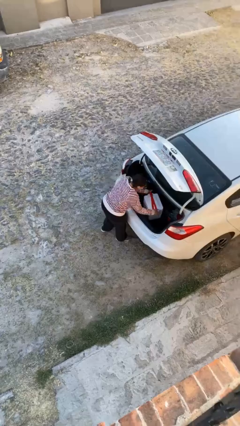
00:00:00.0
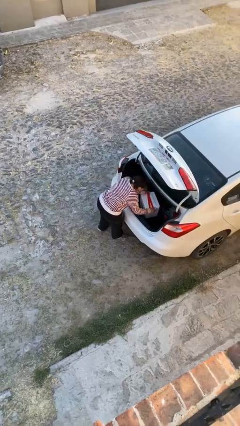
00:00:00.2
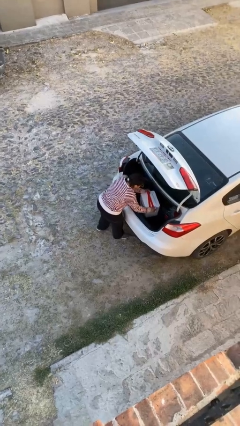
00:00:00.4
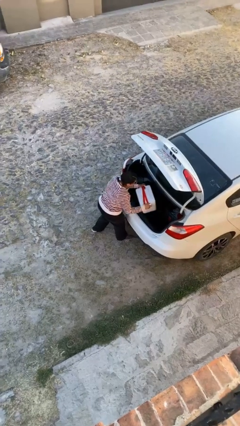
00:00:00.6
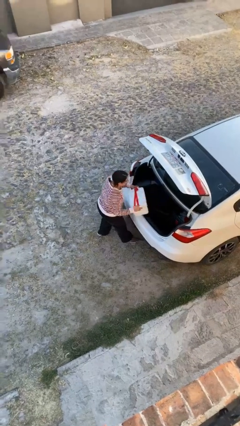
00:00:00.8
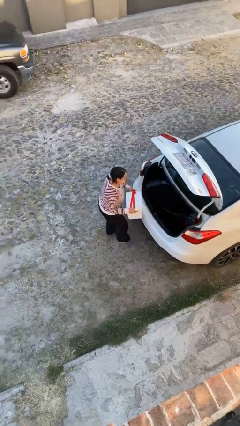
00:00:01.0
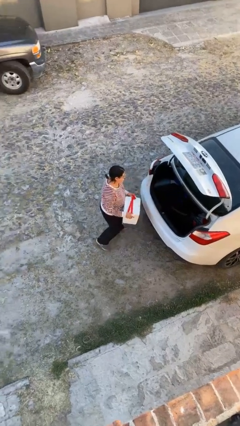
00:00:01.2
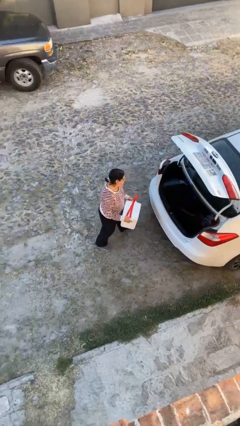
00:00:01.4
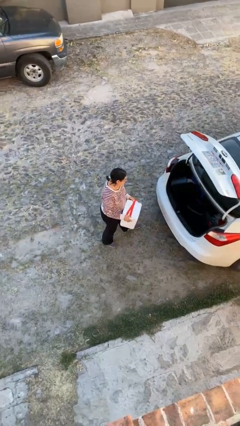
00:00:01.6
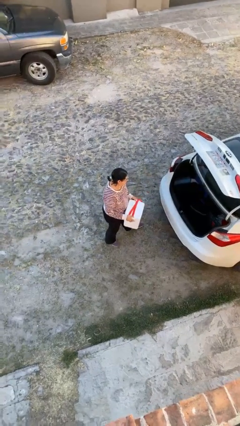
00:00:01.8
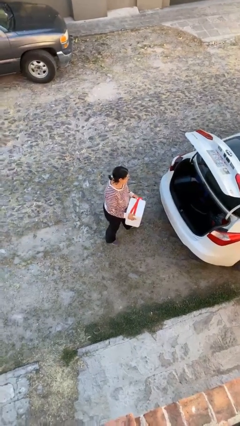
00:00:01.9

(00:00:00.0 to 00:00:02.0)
person unloads car

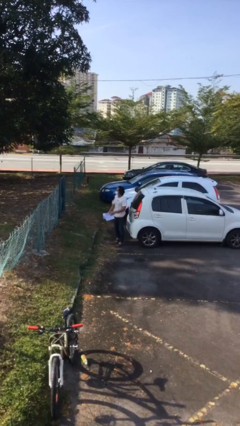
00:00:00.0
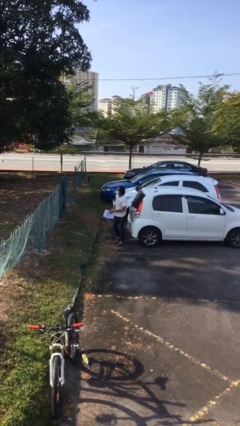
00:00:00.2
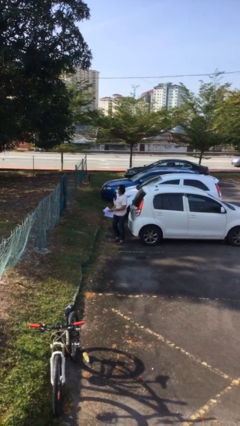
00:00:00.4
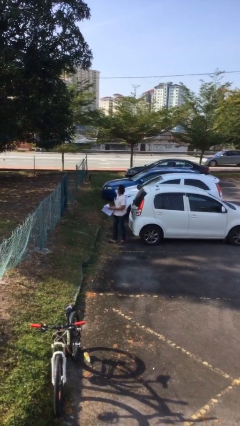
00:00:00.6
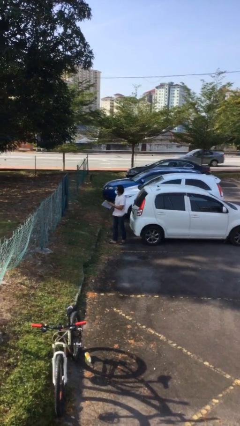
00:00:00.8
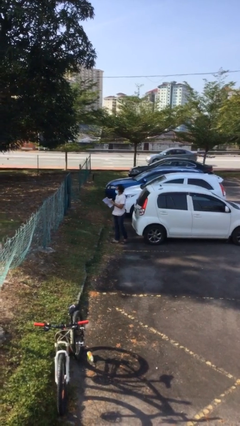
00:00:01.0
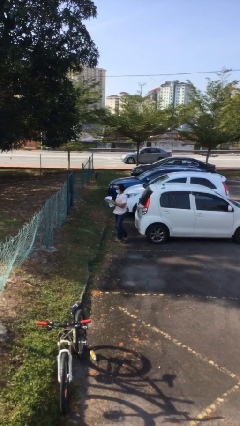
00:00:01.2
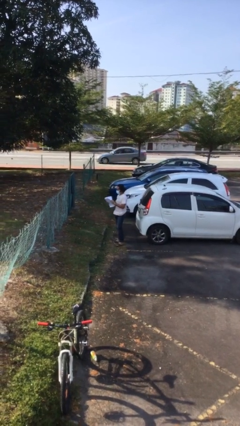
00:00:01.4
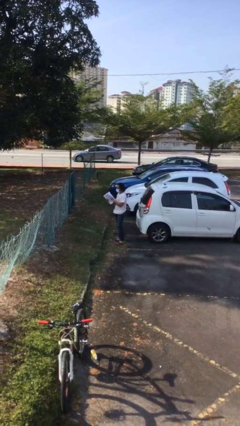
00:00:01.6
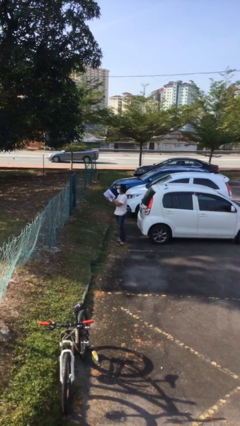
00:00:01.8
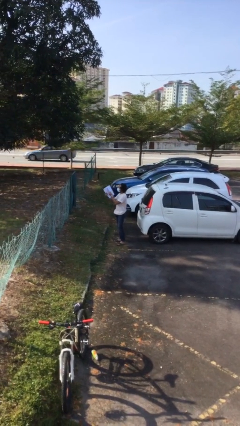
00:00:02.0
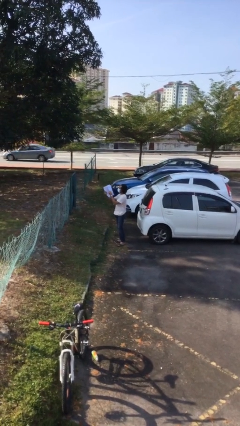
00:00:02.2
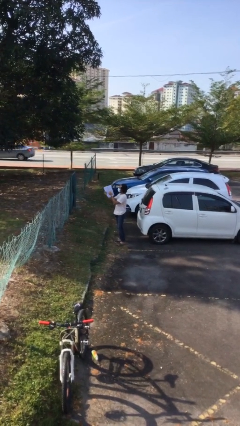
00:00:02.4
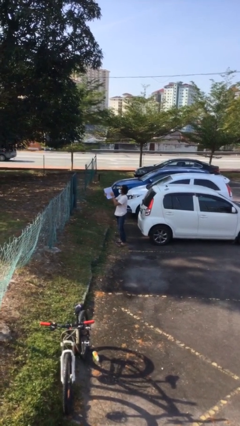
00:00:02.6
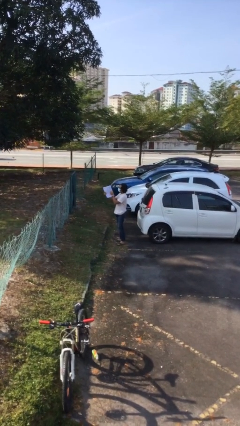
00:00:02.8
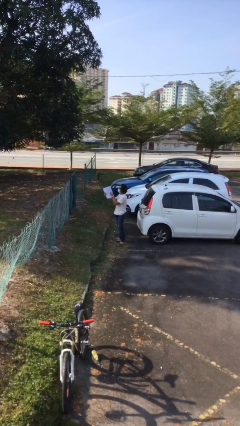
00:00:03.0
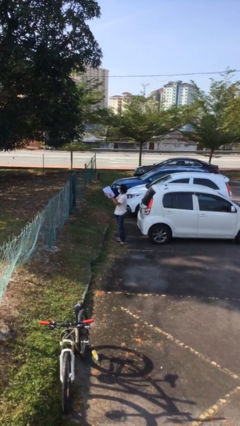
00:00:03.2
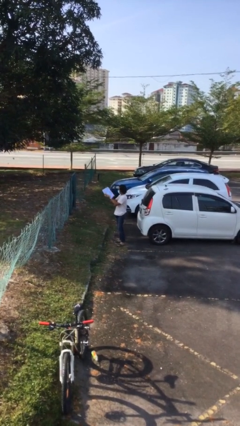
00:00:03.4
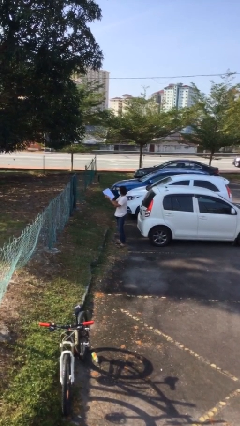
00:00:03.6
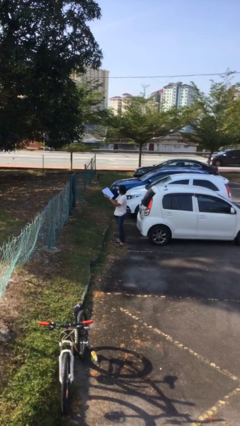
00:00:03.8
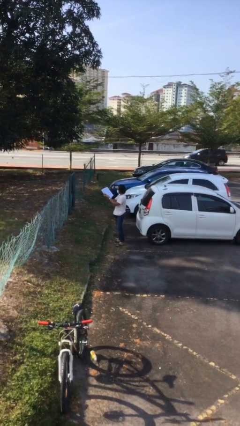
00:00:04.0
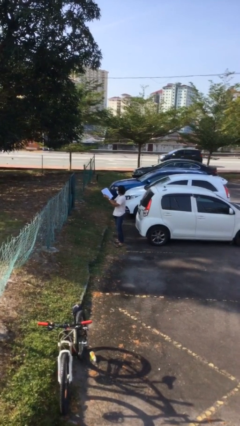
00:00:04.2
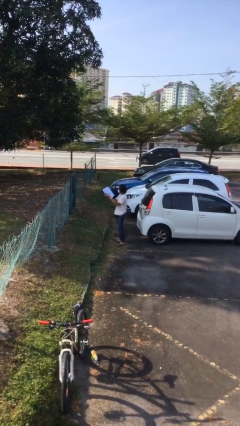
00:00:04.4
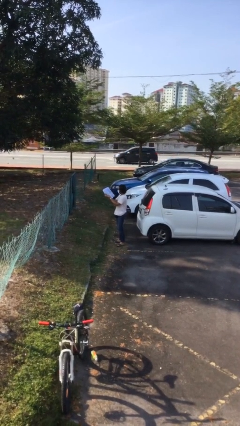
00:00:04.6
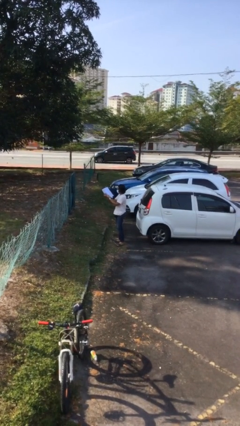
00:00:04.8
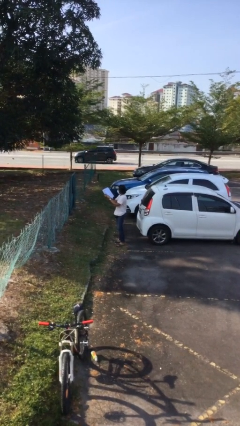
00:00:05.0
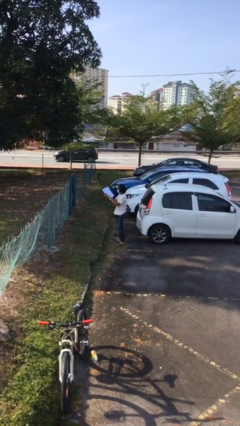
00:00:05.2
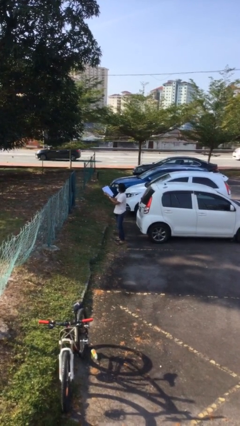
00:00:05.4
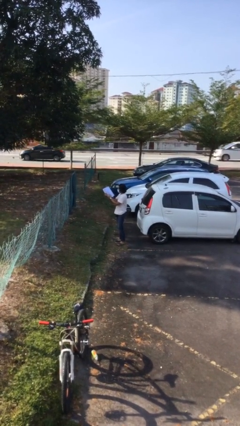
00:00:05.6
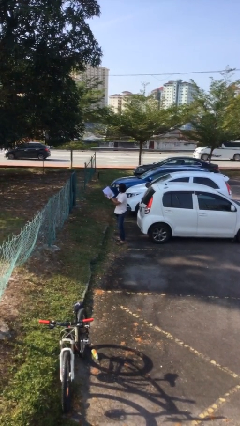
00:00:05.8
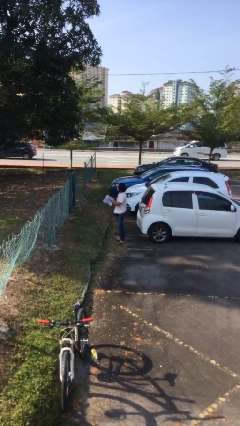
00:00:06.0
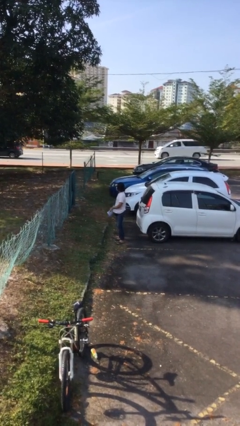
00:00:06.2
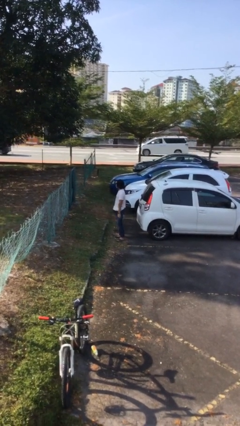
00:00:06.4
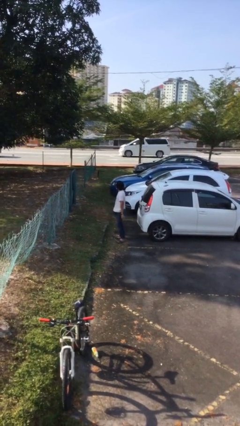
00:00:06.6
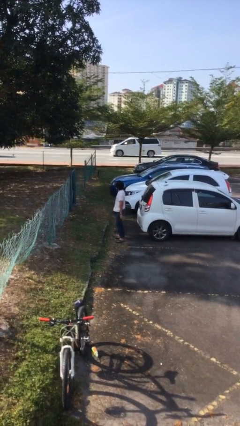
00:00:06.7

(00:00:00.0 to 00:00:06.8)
person reads document

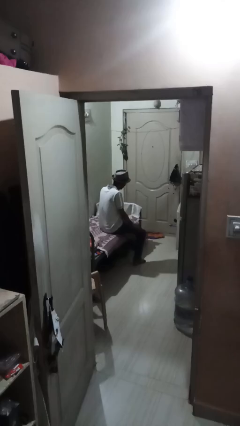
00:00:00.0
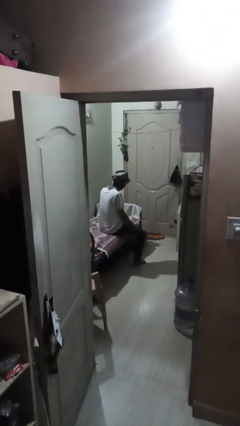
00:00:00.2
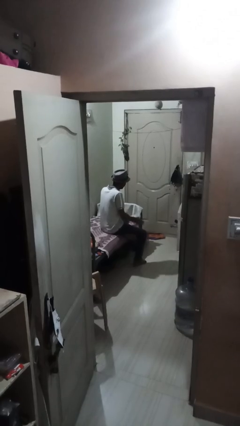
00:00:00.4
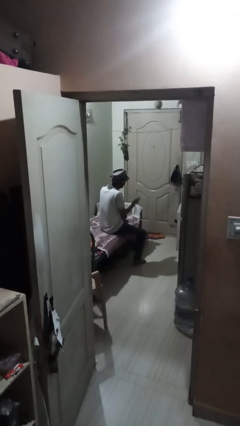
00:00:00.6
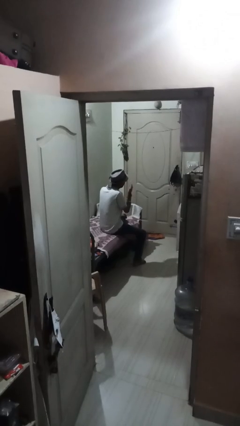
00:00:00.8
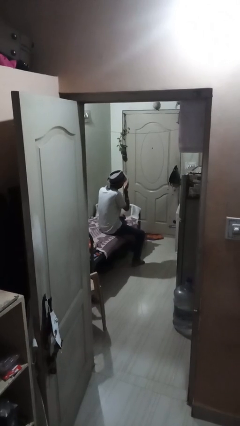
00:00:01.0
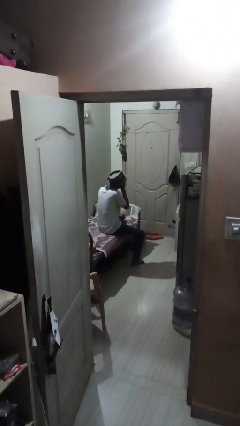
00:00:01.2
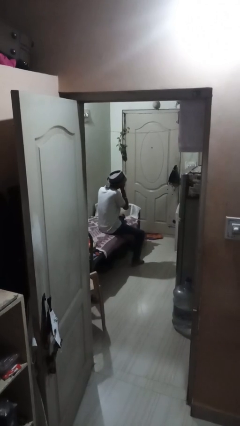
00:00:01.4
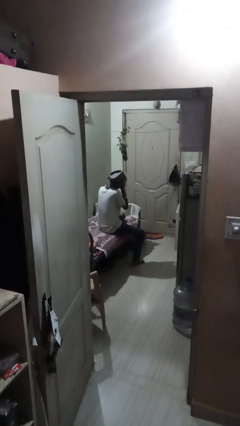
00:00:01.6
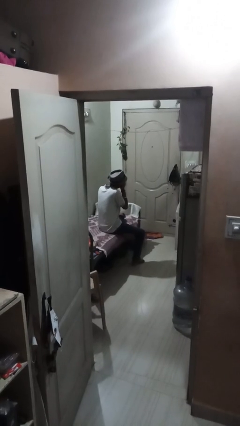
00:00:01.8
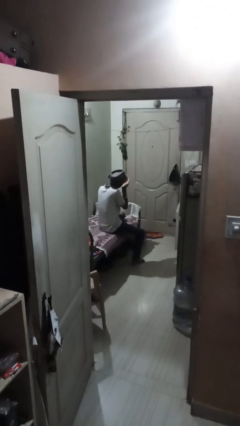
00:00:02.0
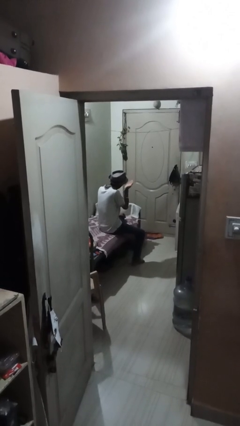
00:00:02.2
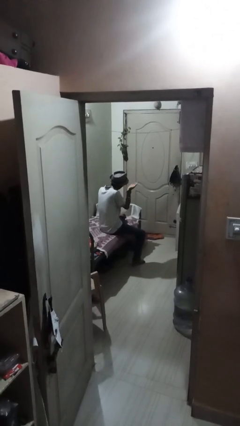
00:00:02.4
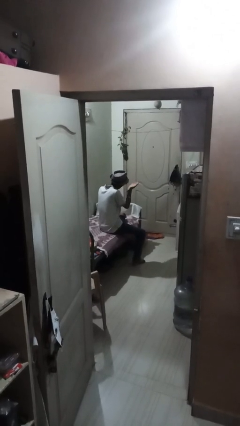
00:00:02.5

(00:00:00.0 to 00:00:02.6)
person gestures blow kiss

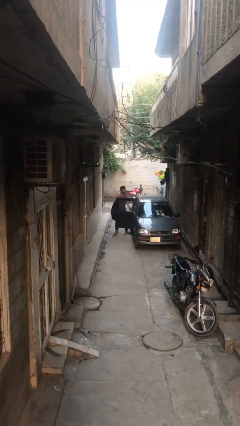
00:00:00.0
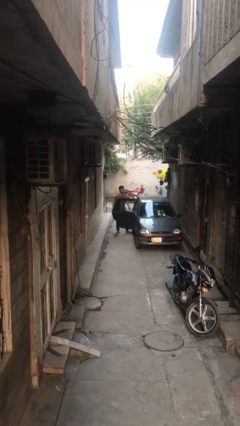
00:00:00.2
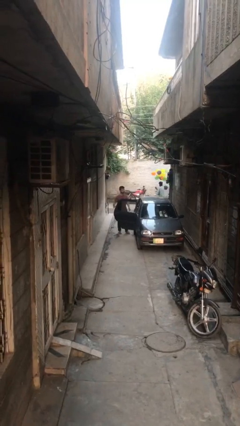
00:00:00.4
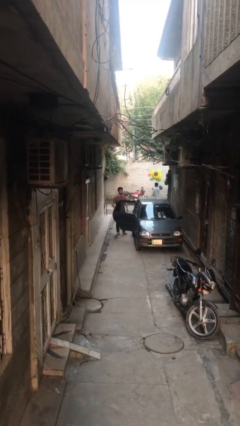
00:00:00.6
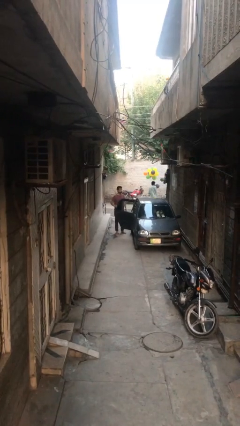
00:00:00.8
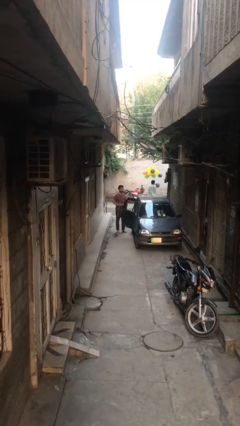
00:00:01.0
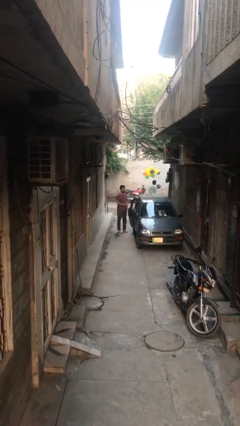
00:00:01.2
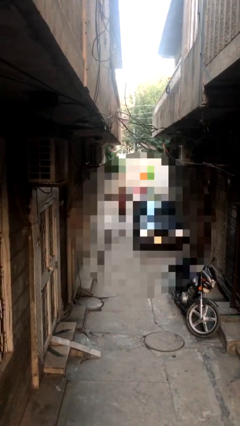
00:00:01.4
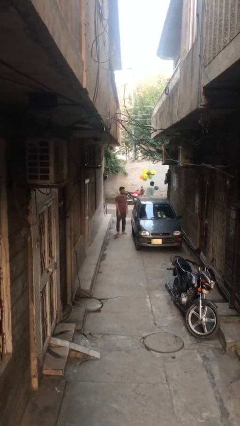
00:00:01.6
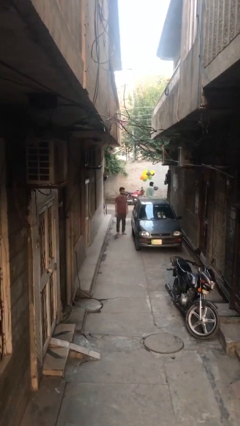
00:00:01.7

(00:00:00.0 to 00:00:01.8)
person closes car door

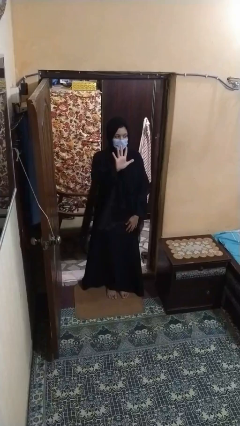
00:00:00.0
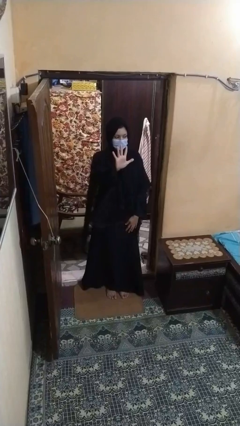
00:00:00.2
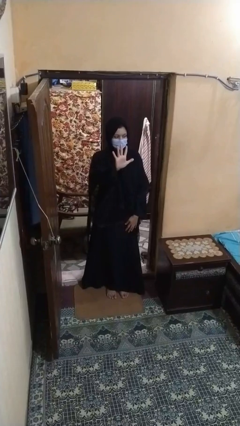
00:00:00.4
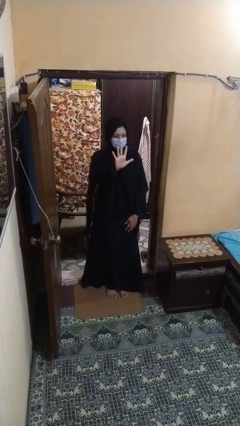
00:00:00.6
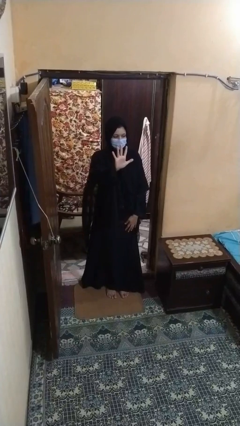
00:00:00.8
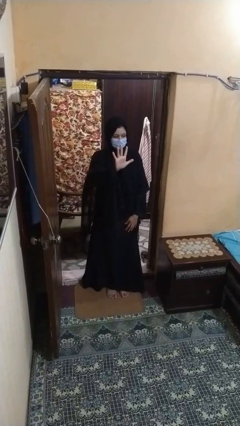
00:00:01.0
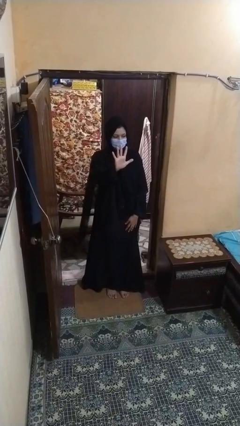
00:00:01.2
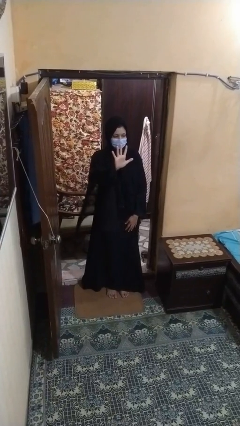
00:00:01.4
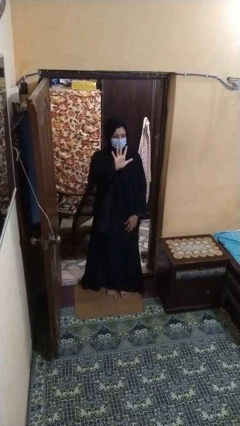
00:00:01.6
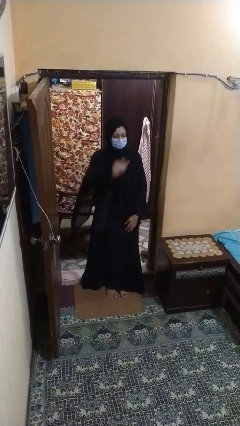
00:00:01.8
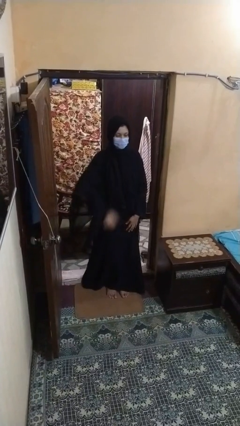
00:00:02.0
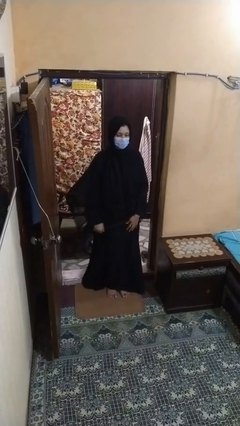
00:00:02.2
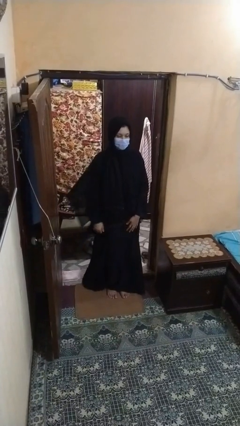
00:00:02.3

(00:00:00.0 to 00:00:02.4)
person gestures number five

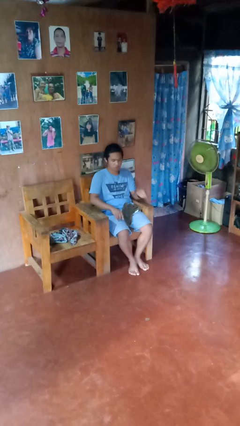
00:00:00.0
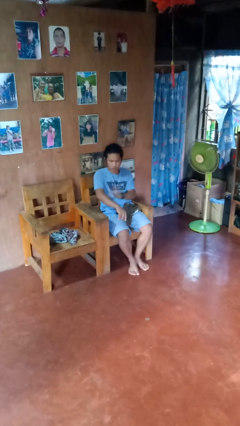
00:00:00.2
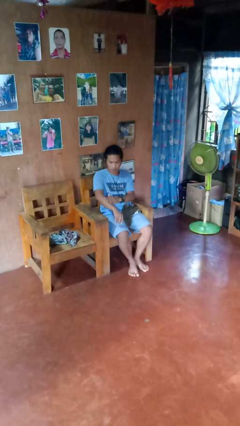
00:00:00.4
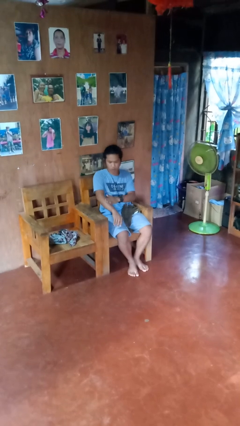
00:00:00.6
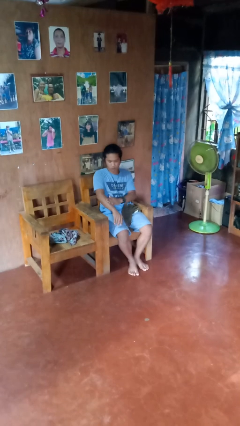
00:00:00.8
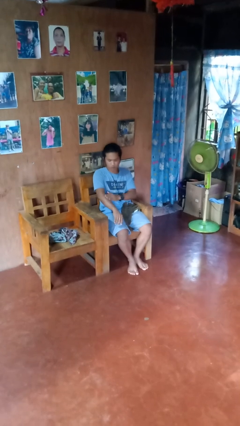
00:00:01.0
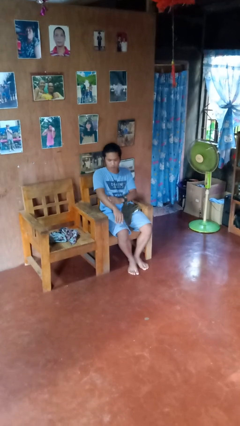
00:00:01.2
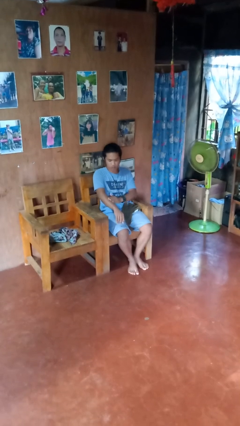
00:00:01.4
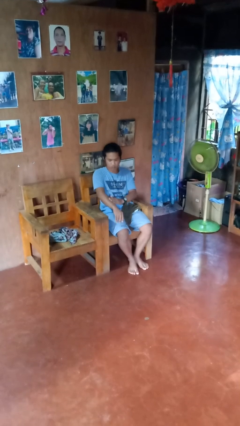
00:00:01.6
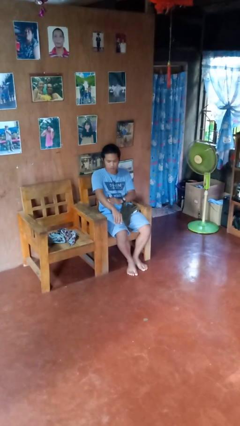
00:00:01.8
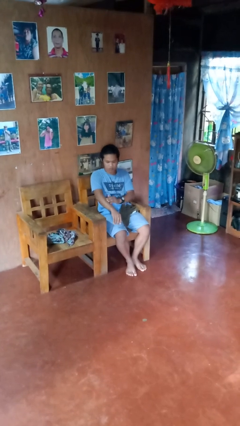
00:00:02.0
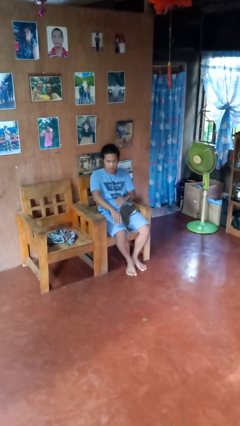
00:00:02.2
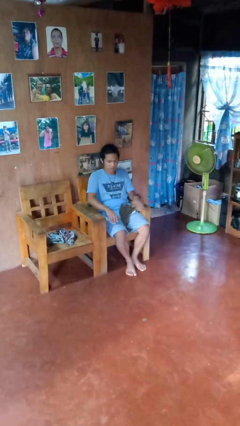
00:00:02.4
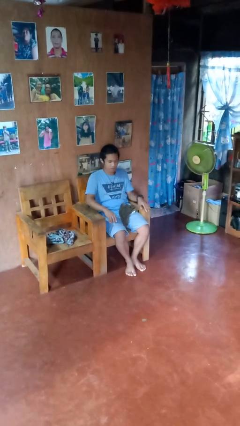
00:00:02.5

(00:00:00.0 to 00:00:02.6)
person swats bug
